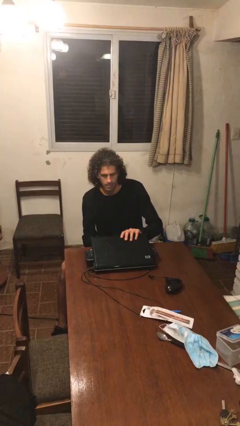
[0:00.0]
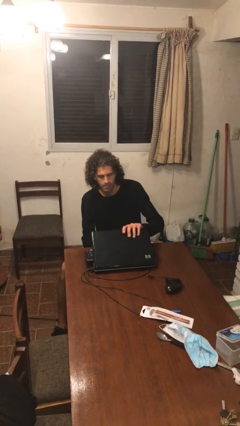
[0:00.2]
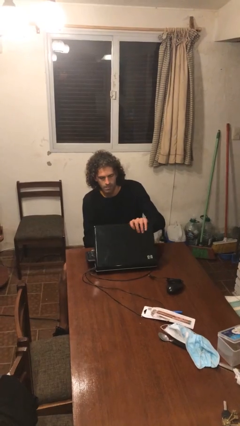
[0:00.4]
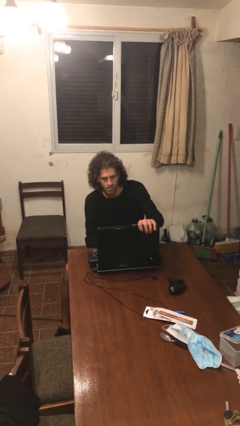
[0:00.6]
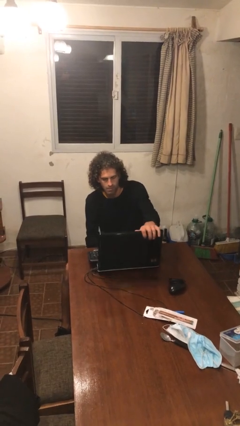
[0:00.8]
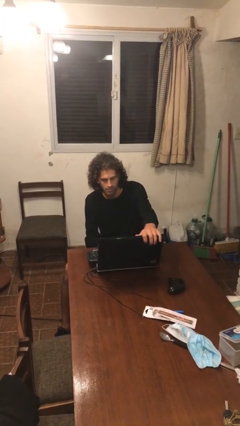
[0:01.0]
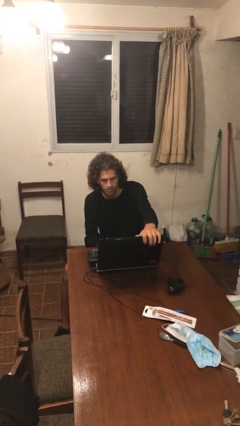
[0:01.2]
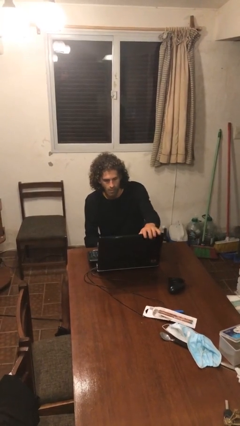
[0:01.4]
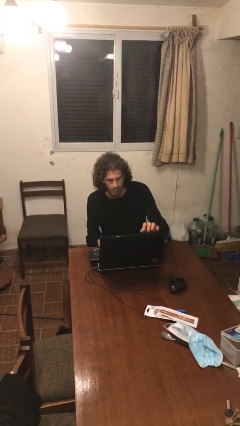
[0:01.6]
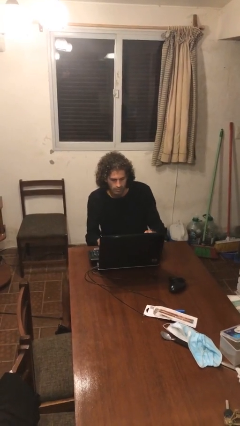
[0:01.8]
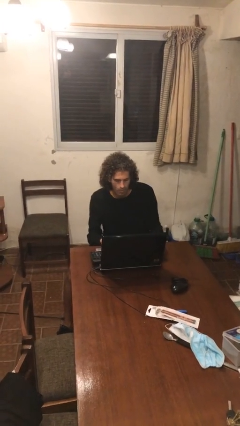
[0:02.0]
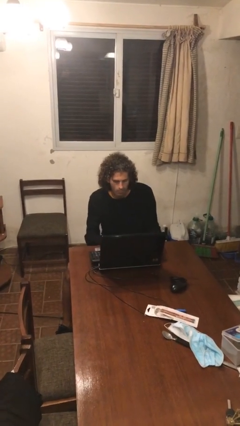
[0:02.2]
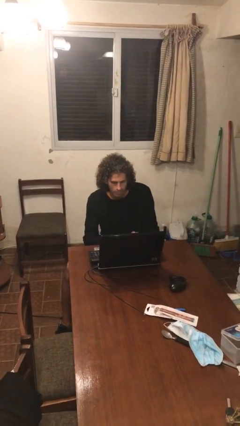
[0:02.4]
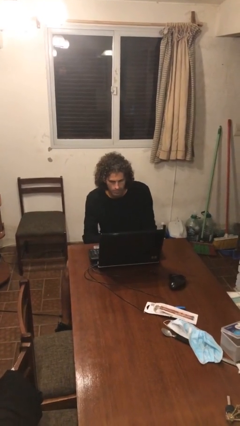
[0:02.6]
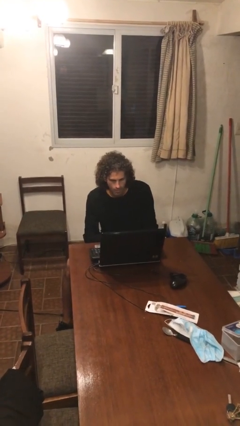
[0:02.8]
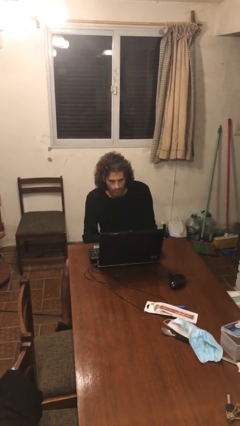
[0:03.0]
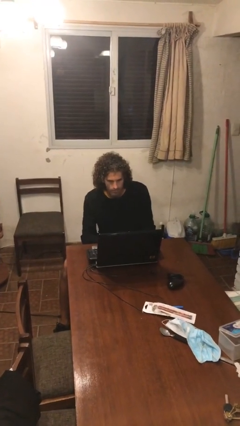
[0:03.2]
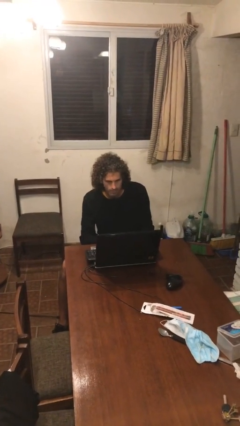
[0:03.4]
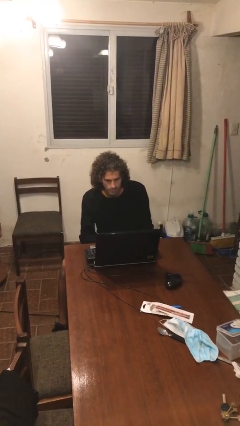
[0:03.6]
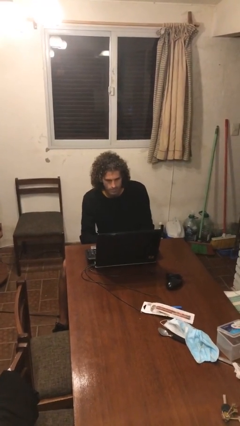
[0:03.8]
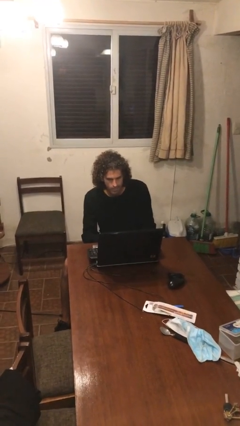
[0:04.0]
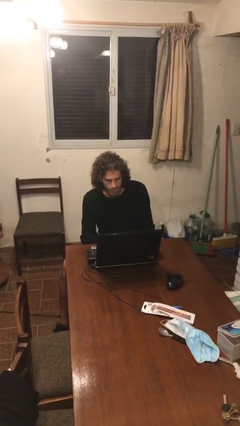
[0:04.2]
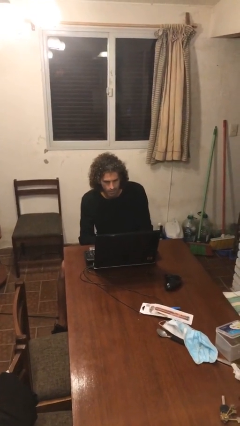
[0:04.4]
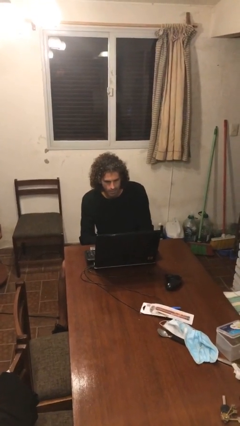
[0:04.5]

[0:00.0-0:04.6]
person interacts with laptop

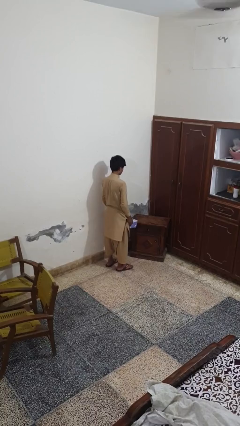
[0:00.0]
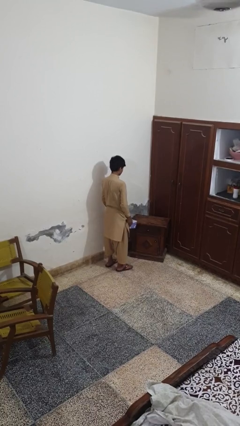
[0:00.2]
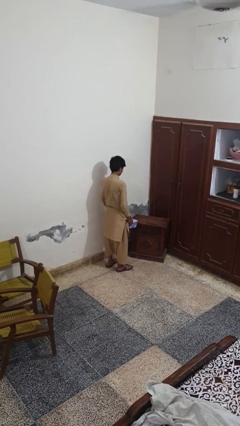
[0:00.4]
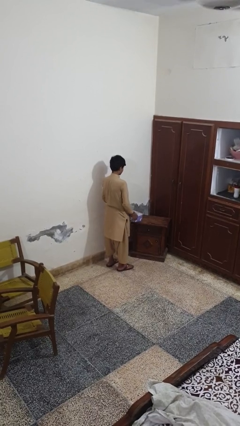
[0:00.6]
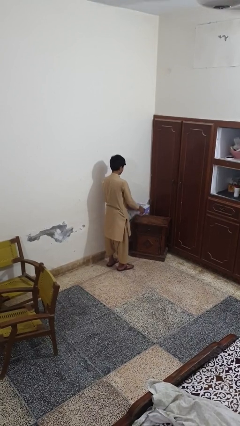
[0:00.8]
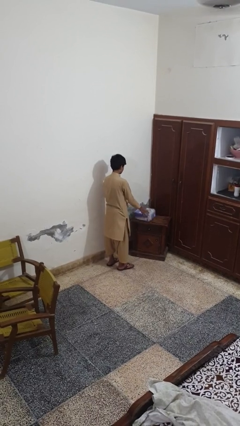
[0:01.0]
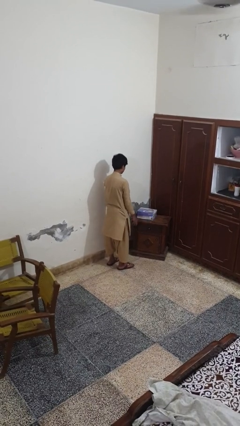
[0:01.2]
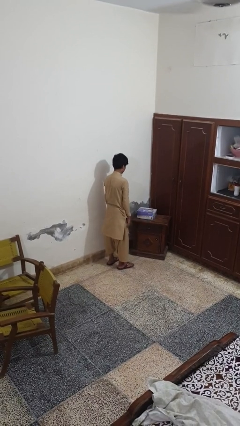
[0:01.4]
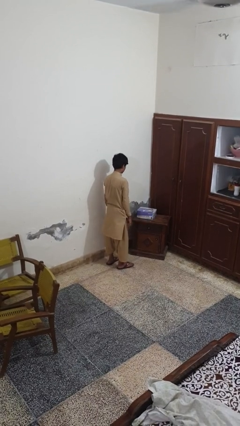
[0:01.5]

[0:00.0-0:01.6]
person throws object on table

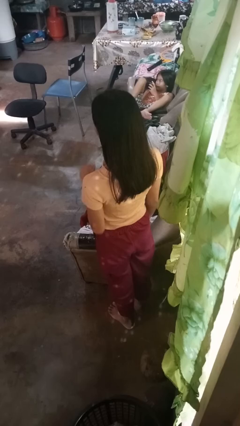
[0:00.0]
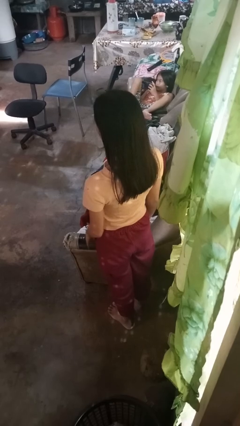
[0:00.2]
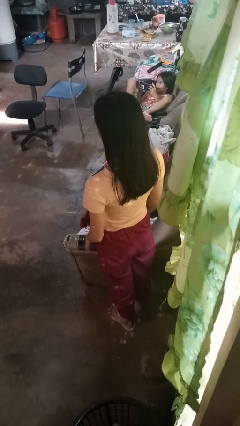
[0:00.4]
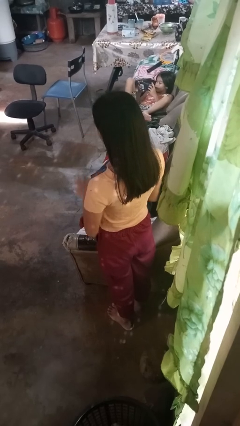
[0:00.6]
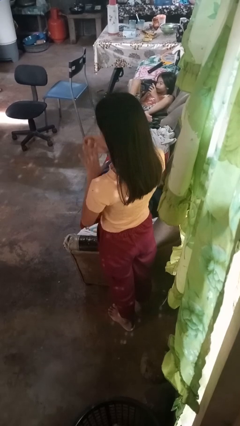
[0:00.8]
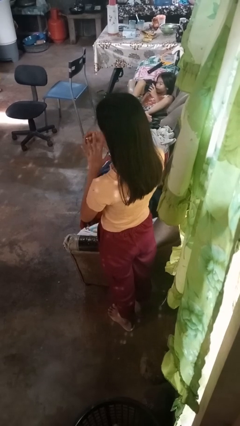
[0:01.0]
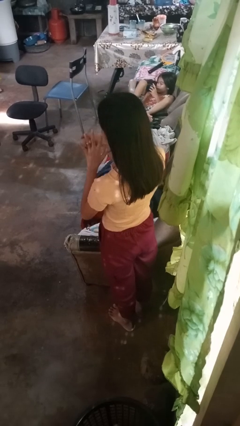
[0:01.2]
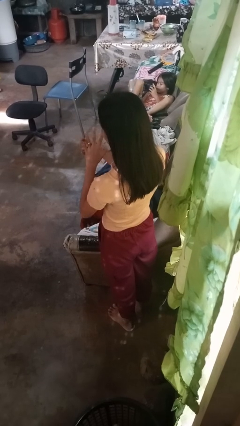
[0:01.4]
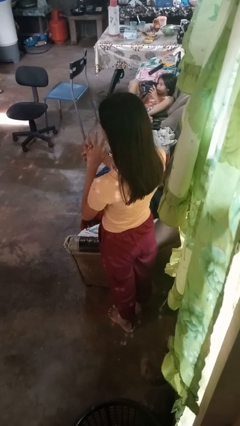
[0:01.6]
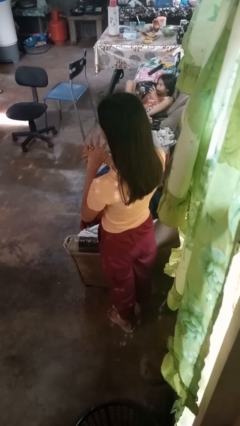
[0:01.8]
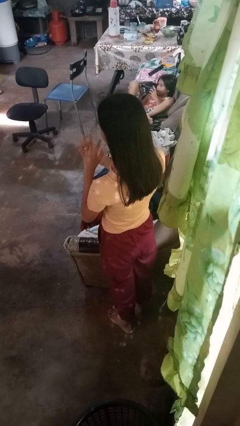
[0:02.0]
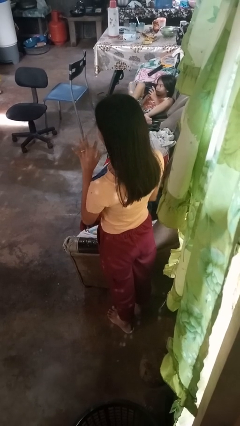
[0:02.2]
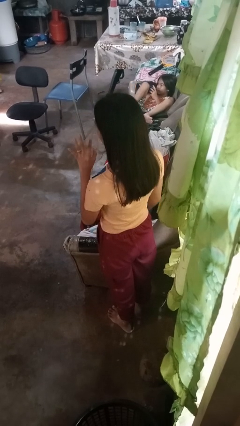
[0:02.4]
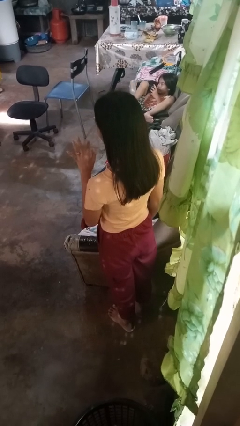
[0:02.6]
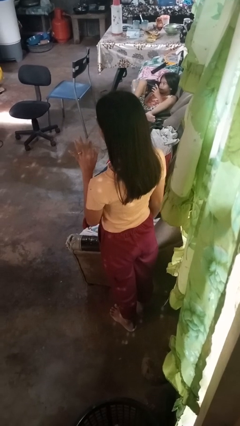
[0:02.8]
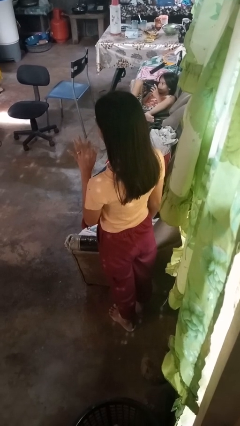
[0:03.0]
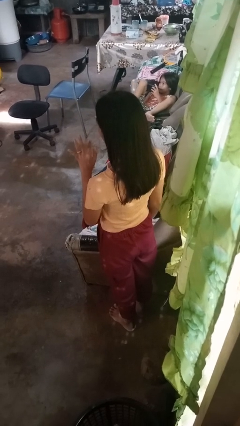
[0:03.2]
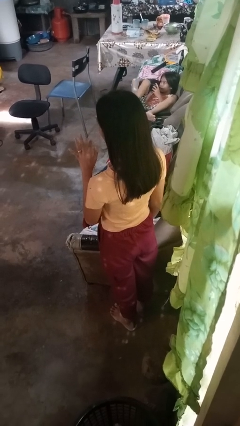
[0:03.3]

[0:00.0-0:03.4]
person puts on ring

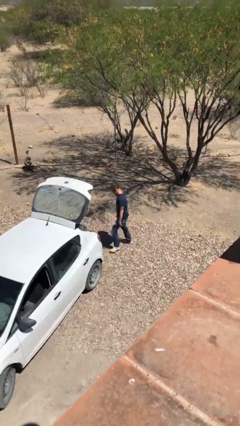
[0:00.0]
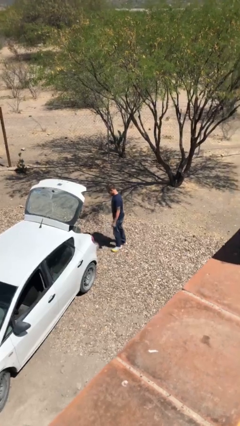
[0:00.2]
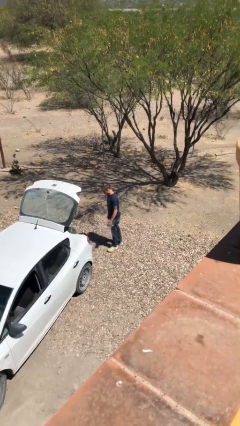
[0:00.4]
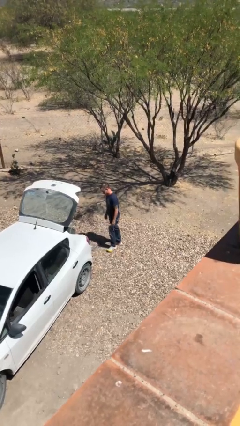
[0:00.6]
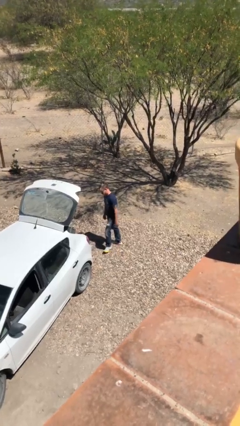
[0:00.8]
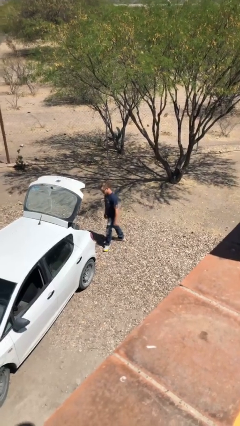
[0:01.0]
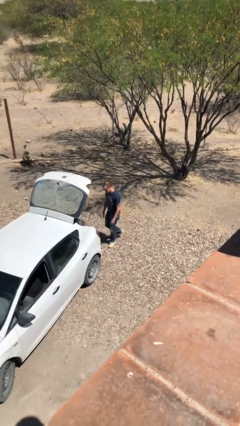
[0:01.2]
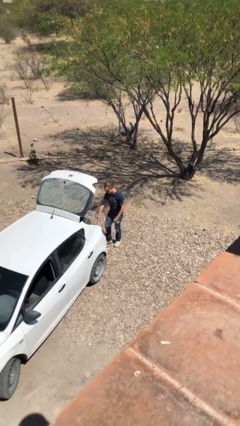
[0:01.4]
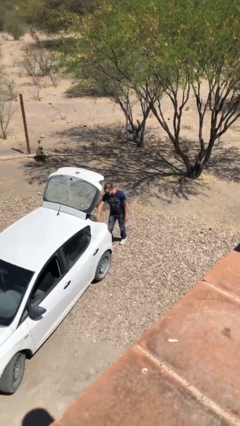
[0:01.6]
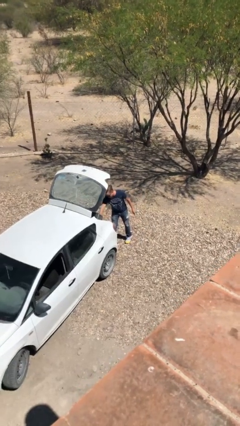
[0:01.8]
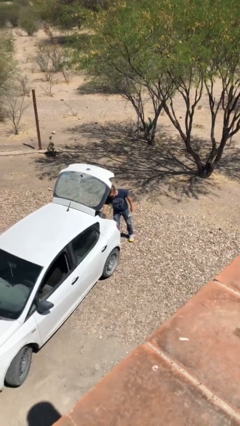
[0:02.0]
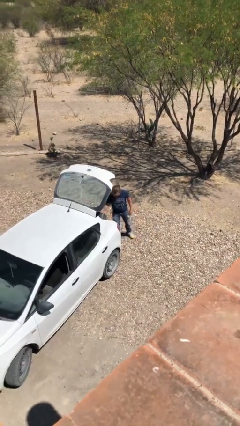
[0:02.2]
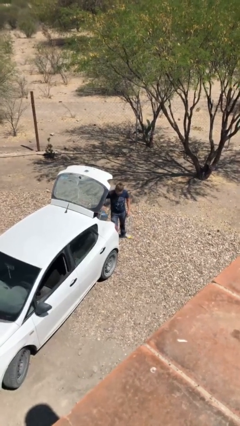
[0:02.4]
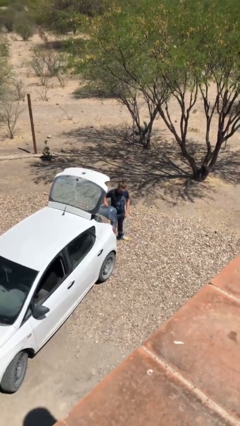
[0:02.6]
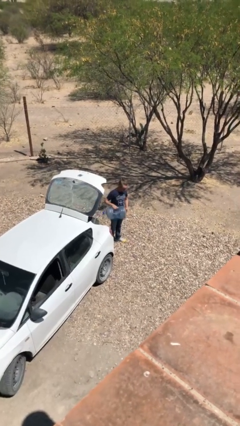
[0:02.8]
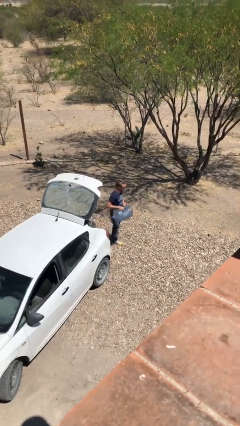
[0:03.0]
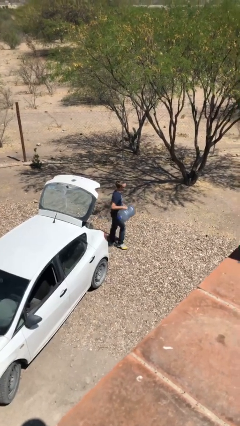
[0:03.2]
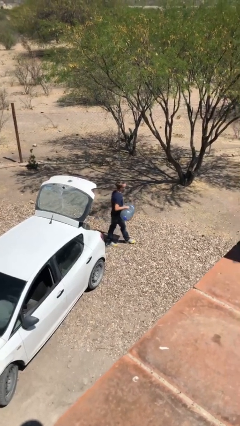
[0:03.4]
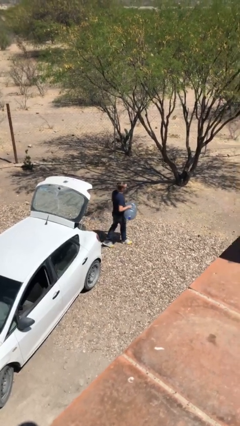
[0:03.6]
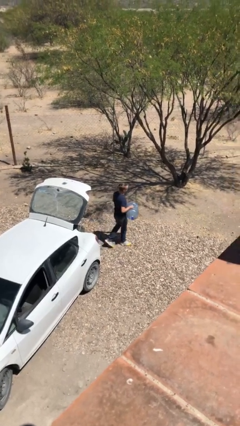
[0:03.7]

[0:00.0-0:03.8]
person unloads car

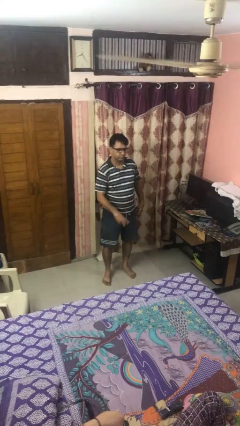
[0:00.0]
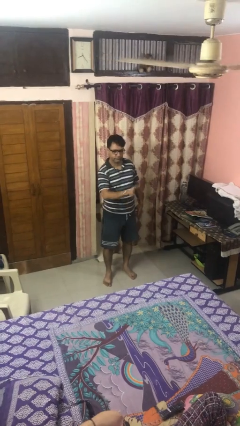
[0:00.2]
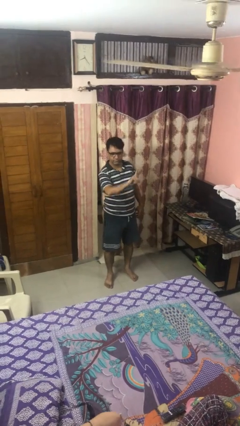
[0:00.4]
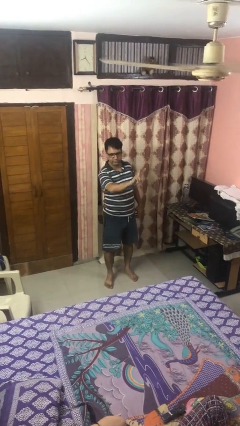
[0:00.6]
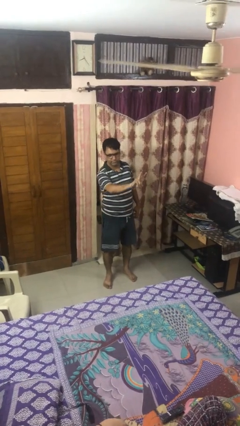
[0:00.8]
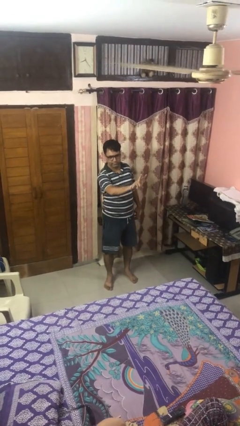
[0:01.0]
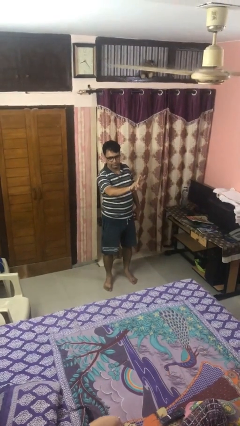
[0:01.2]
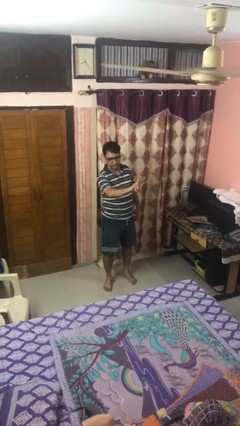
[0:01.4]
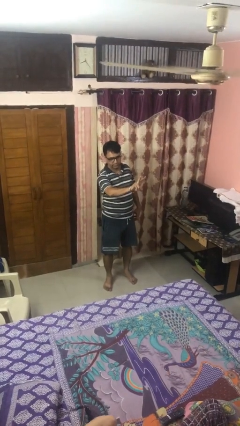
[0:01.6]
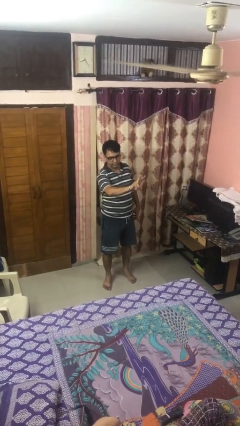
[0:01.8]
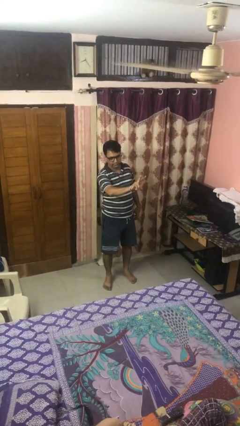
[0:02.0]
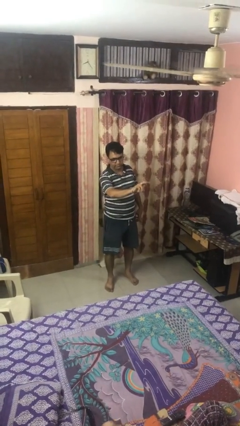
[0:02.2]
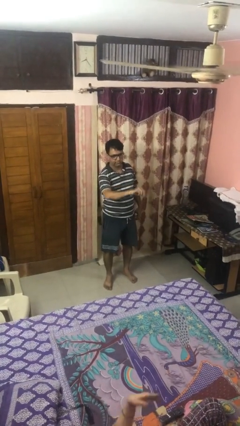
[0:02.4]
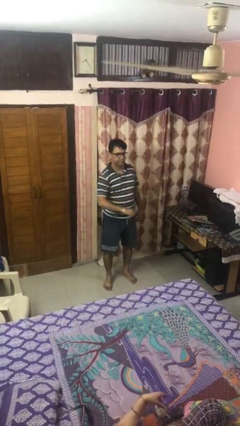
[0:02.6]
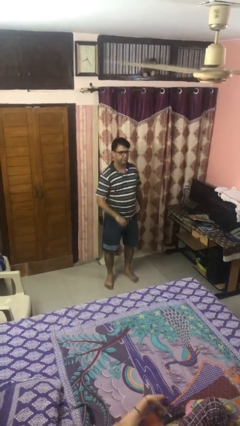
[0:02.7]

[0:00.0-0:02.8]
person gestures peace

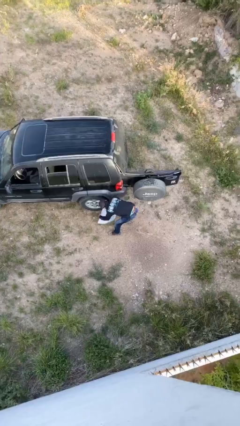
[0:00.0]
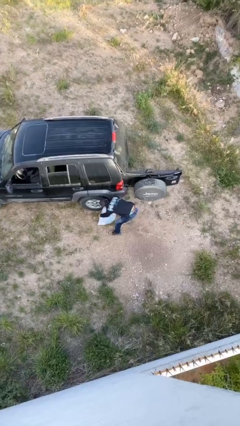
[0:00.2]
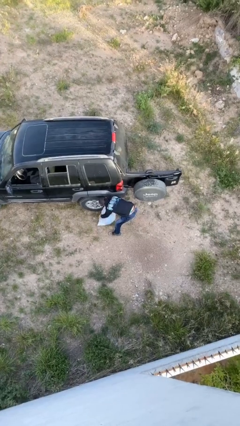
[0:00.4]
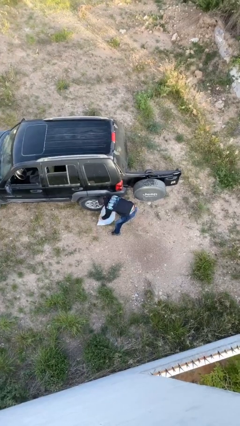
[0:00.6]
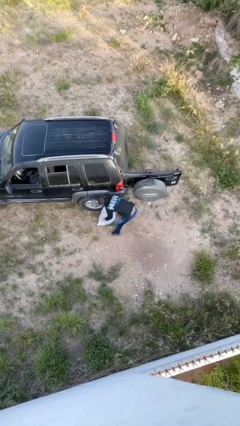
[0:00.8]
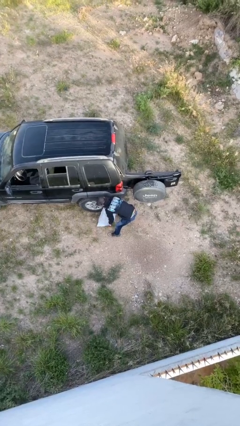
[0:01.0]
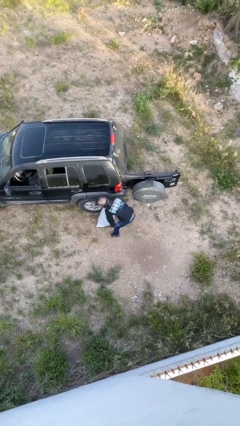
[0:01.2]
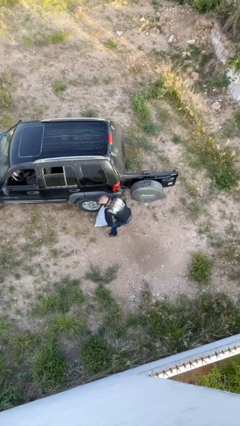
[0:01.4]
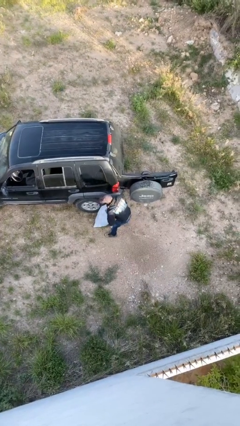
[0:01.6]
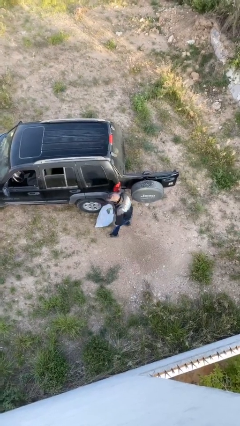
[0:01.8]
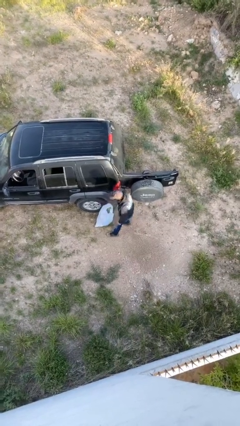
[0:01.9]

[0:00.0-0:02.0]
person puts down object on floor
